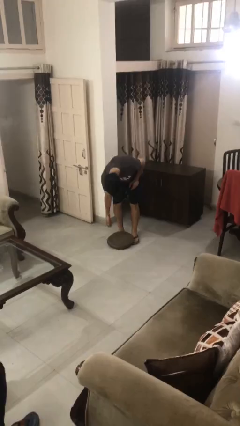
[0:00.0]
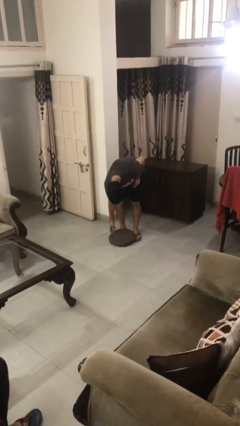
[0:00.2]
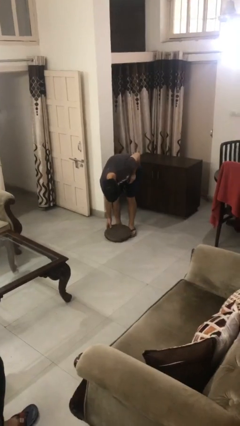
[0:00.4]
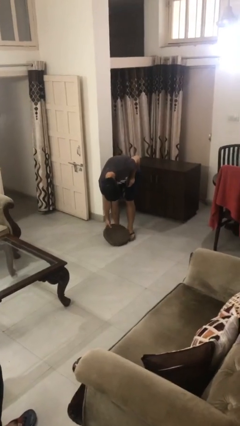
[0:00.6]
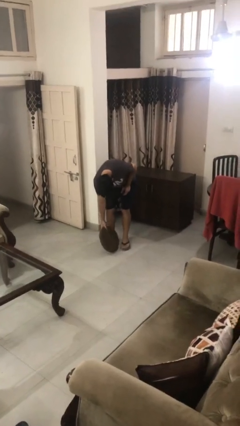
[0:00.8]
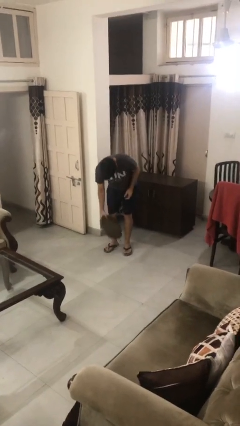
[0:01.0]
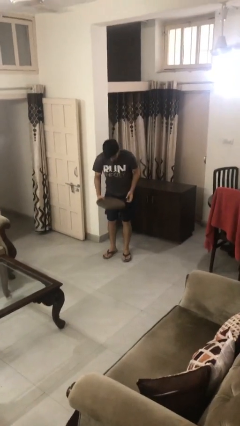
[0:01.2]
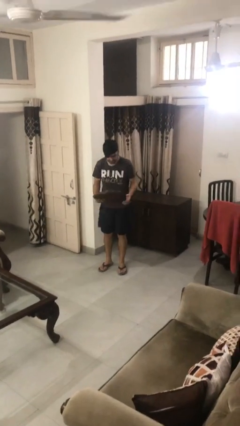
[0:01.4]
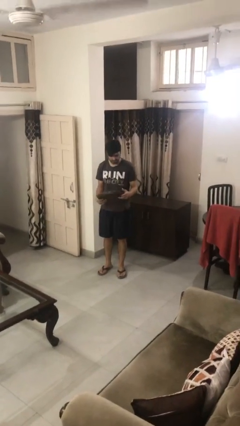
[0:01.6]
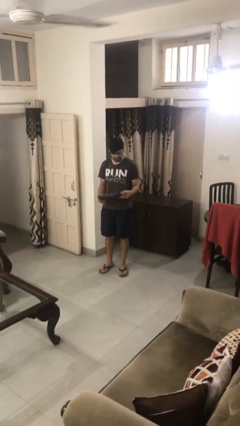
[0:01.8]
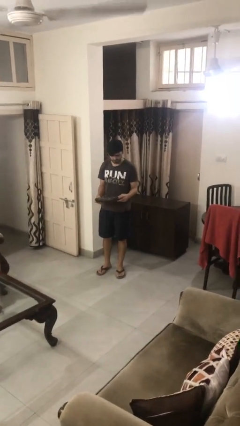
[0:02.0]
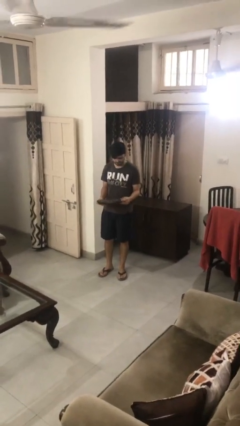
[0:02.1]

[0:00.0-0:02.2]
person picks up object from floor

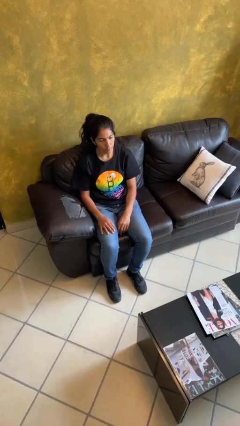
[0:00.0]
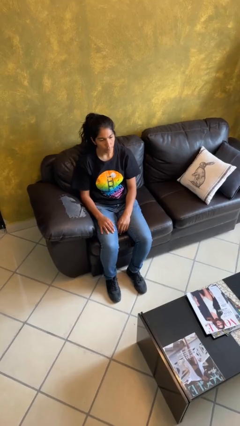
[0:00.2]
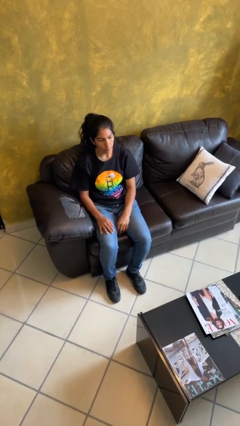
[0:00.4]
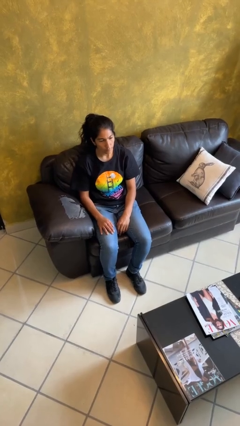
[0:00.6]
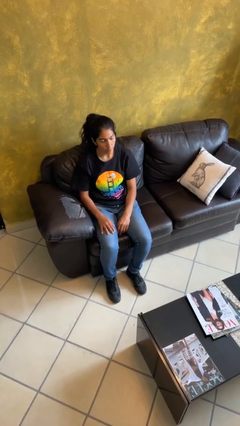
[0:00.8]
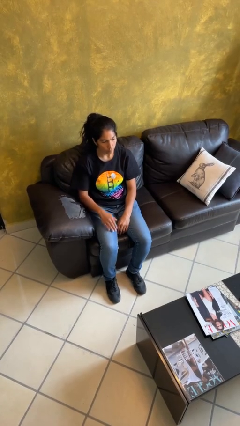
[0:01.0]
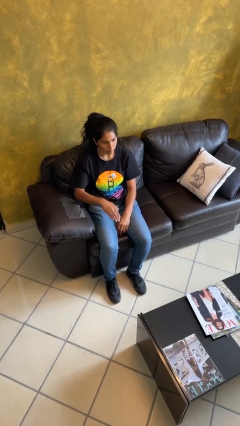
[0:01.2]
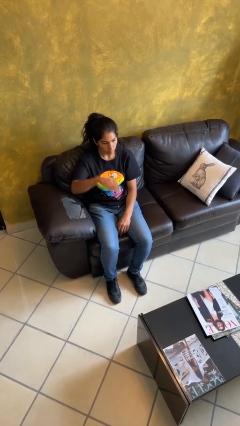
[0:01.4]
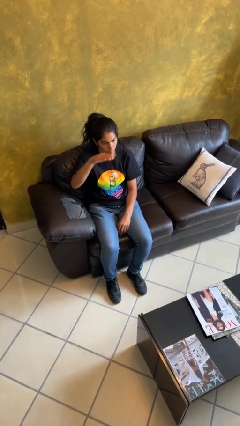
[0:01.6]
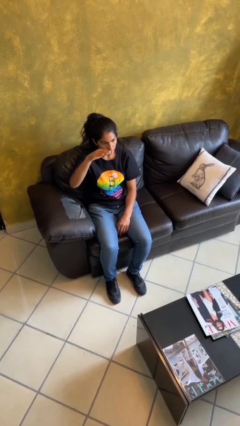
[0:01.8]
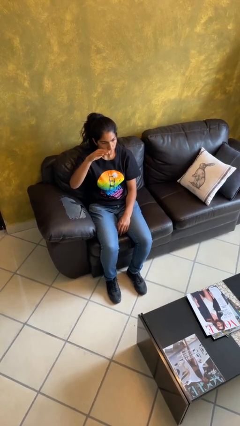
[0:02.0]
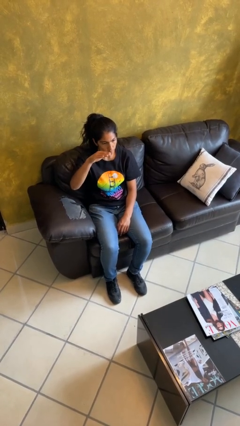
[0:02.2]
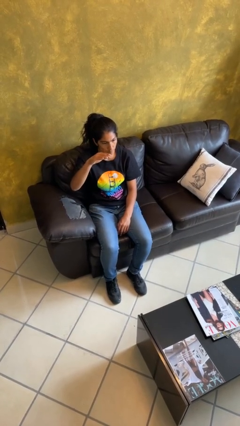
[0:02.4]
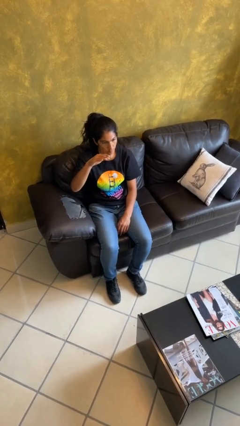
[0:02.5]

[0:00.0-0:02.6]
person gestures swipe up

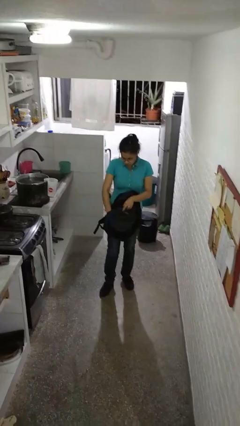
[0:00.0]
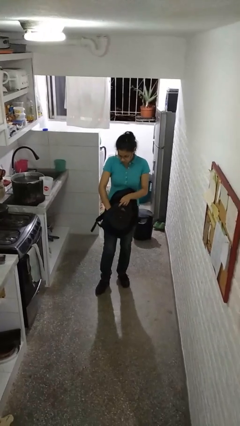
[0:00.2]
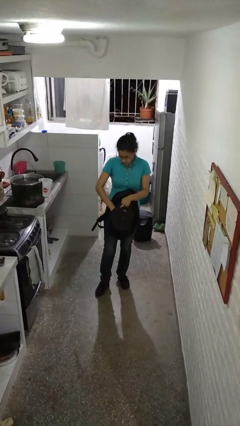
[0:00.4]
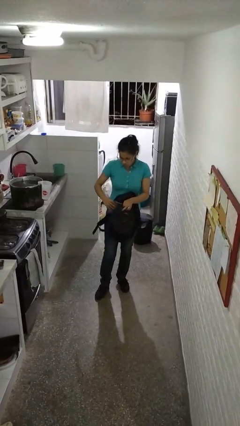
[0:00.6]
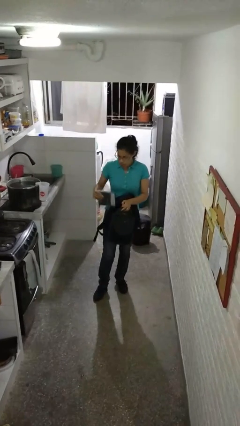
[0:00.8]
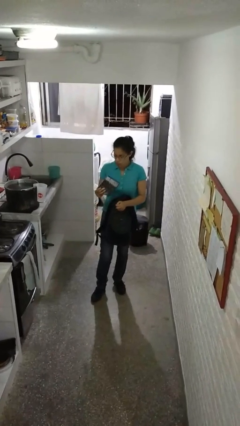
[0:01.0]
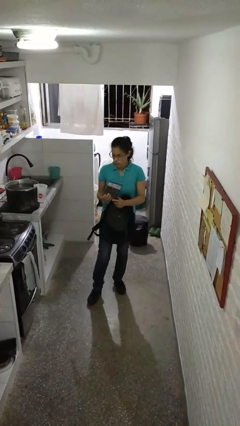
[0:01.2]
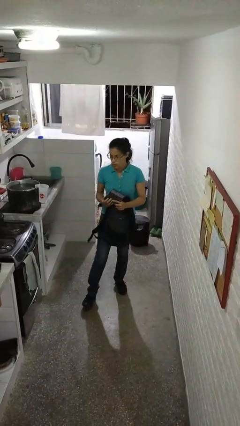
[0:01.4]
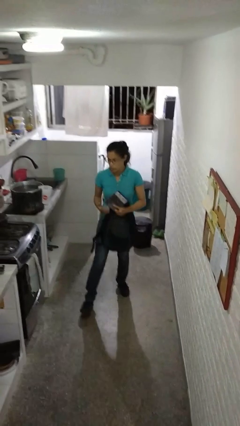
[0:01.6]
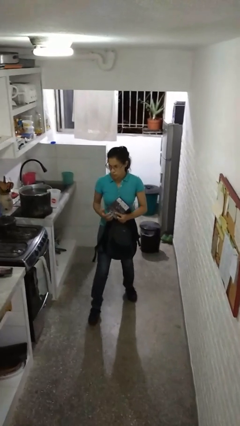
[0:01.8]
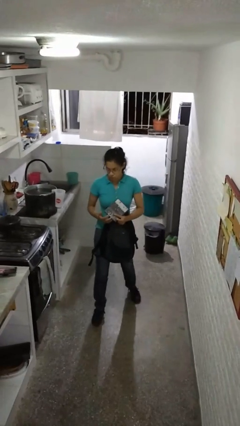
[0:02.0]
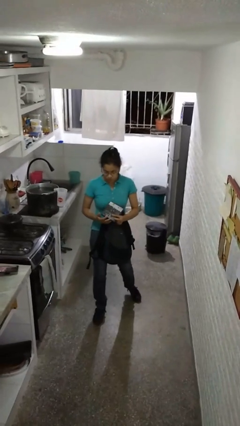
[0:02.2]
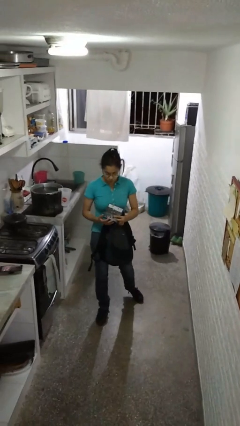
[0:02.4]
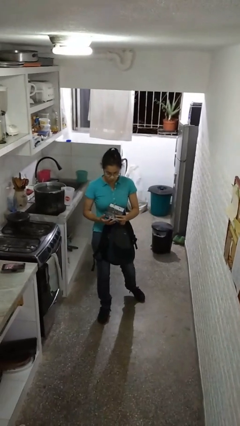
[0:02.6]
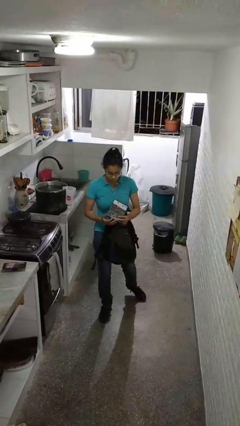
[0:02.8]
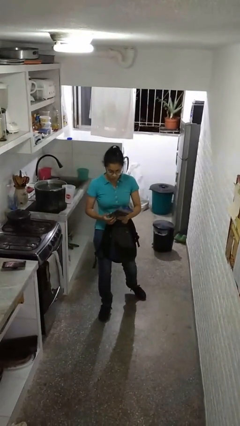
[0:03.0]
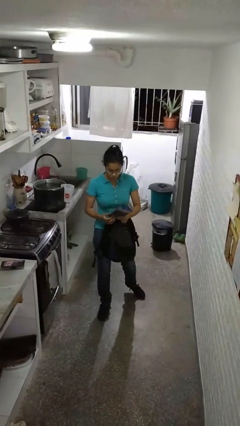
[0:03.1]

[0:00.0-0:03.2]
person takes object from backpack

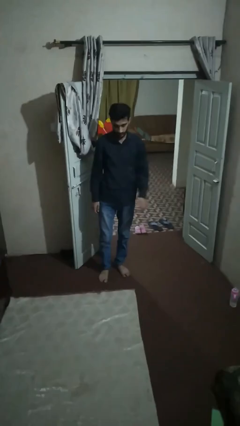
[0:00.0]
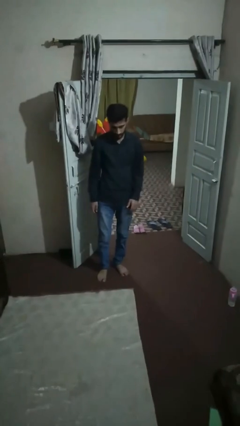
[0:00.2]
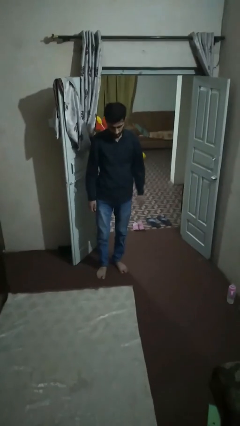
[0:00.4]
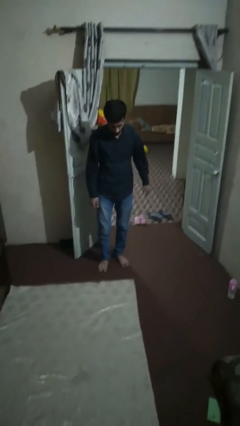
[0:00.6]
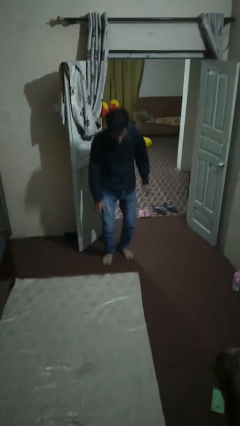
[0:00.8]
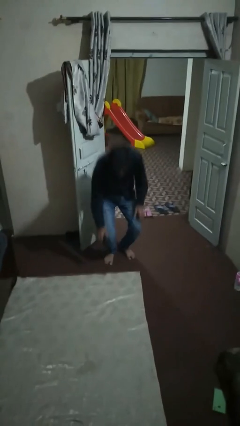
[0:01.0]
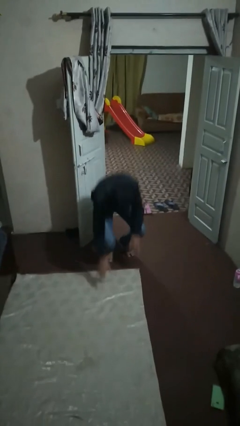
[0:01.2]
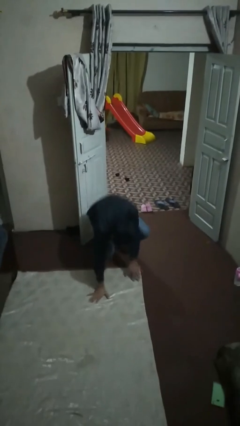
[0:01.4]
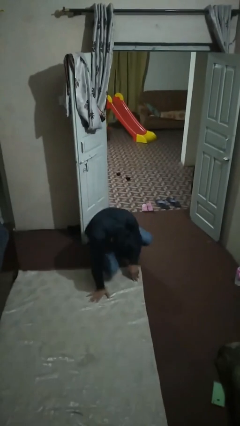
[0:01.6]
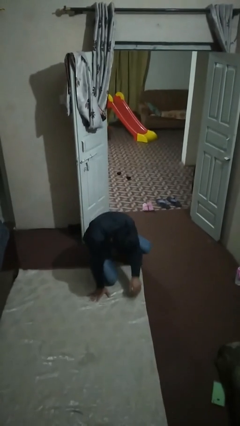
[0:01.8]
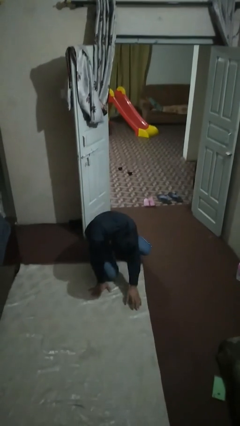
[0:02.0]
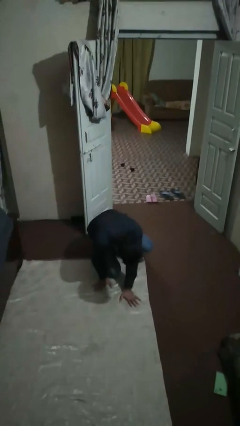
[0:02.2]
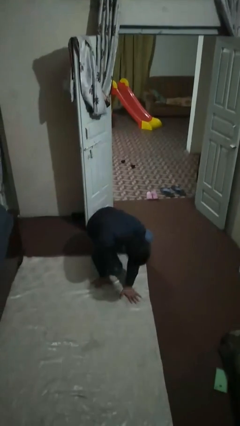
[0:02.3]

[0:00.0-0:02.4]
person trips on object on floor

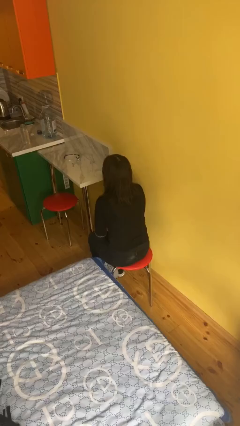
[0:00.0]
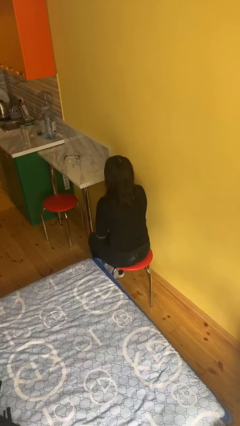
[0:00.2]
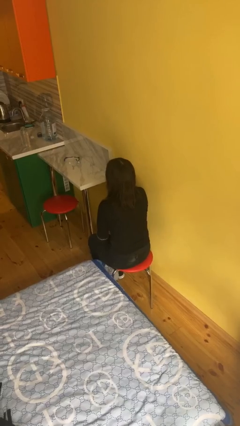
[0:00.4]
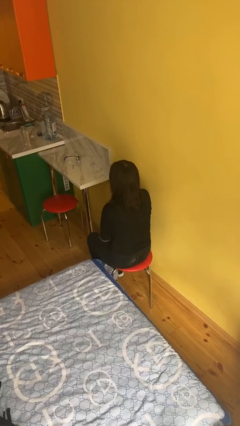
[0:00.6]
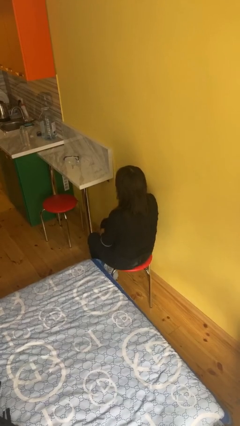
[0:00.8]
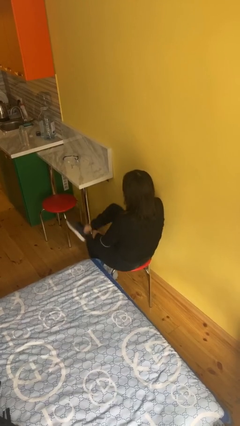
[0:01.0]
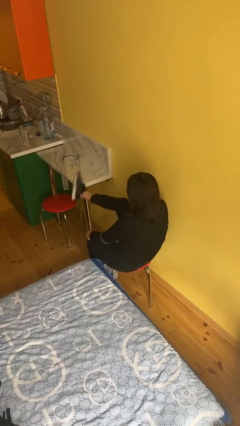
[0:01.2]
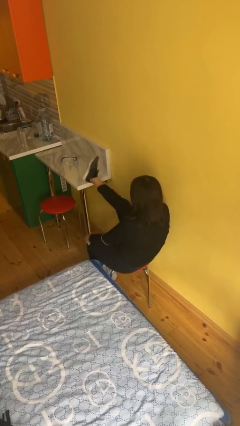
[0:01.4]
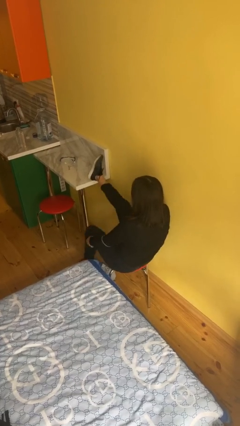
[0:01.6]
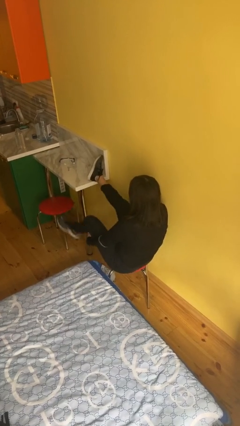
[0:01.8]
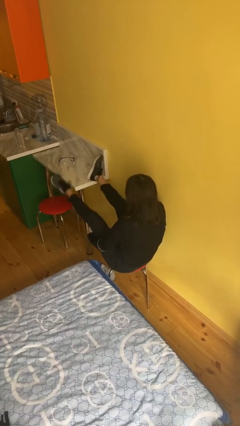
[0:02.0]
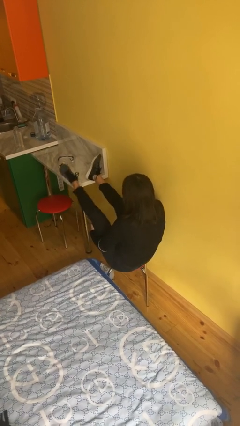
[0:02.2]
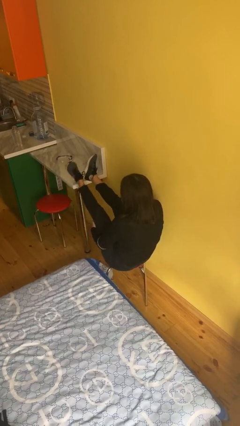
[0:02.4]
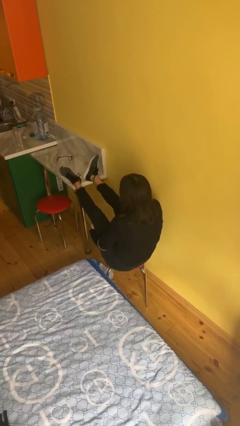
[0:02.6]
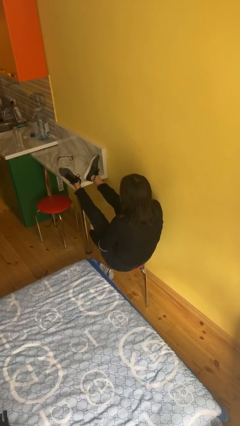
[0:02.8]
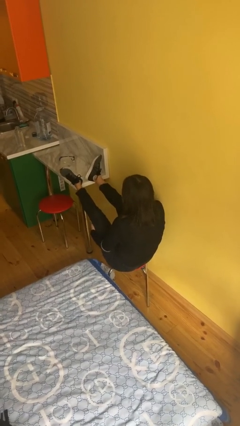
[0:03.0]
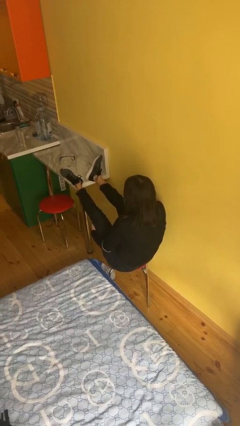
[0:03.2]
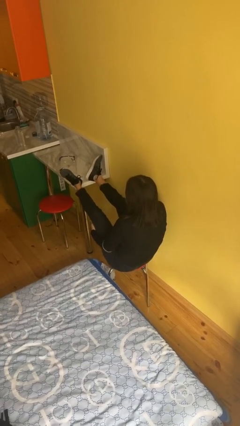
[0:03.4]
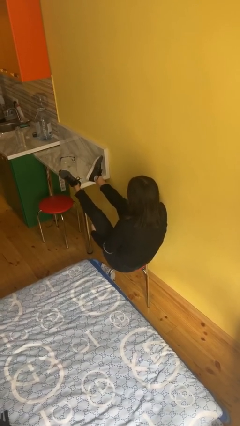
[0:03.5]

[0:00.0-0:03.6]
person puts feet up

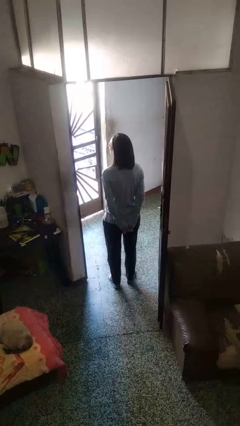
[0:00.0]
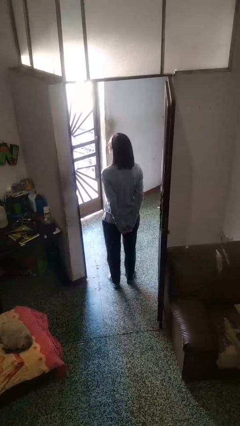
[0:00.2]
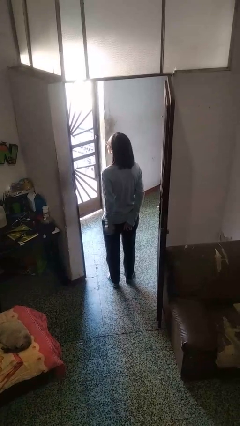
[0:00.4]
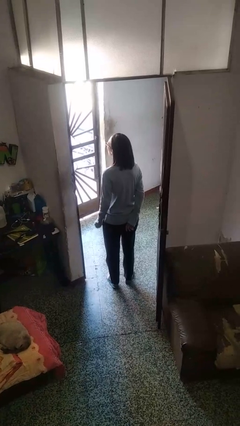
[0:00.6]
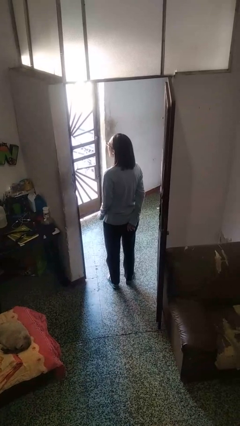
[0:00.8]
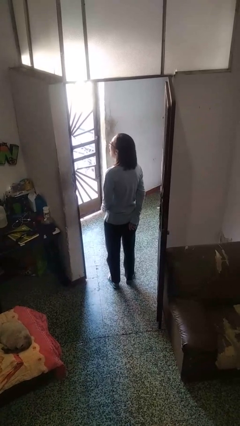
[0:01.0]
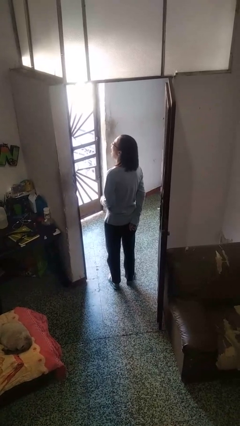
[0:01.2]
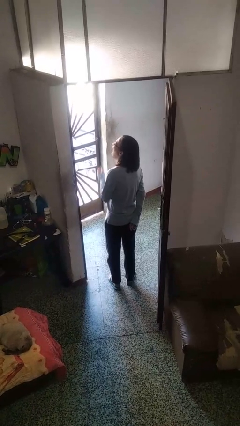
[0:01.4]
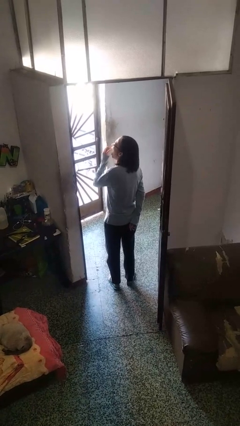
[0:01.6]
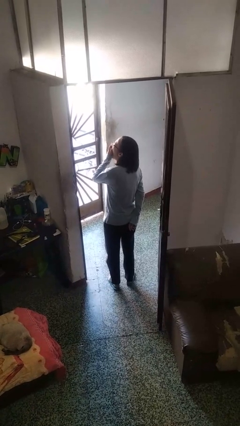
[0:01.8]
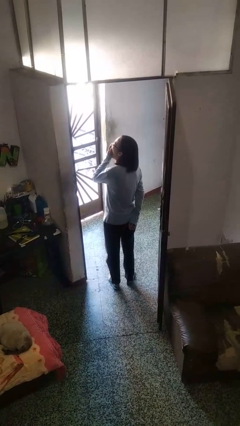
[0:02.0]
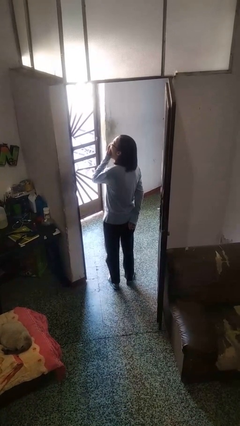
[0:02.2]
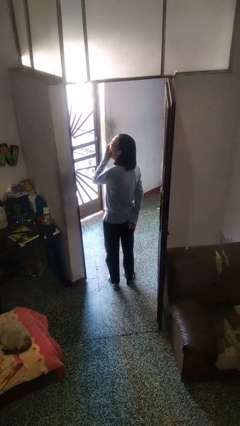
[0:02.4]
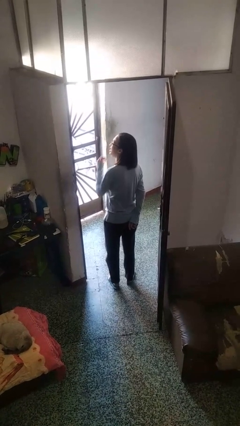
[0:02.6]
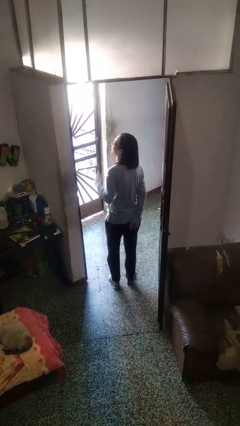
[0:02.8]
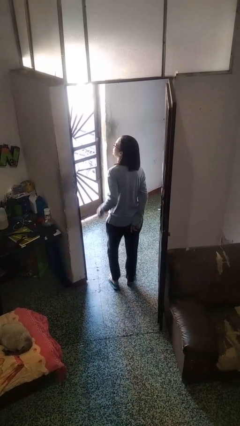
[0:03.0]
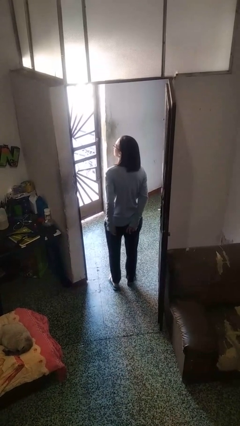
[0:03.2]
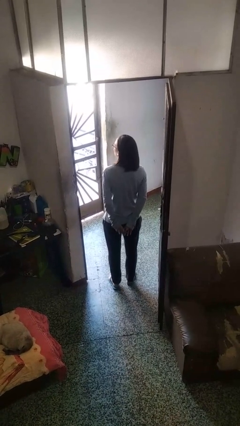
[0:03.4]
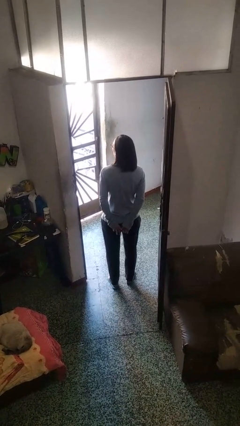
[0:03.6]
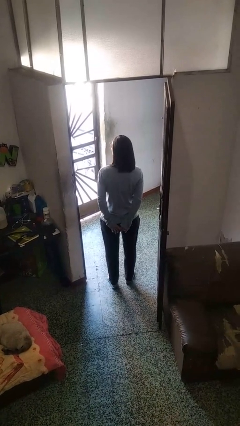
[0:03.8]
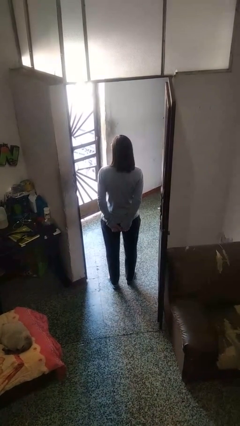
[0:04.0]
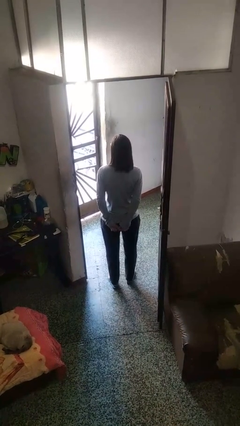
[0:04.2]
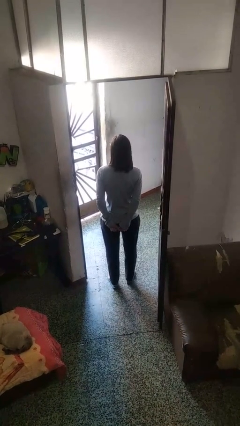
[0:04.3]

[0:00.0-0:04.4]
person yawns
